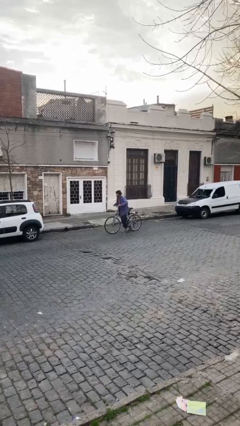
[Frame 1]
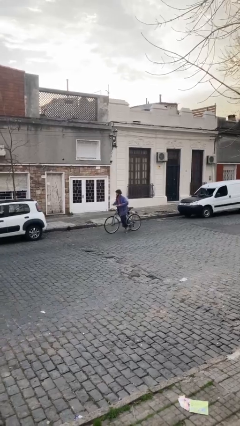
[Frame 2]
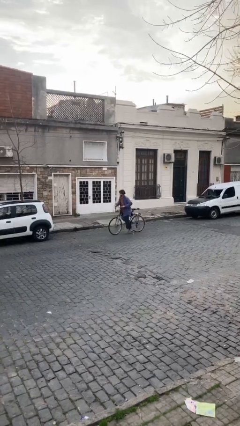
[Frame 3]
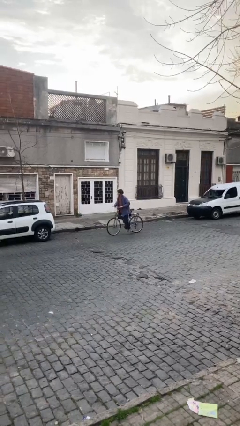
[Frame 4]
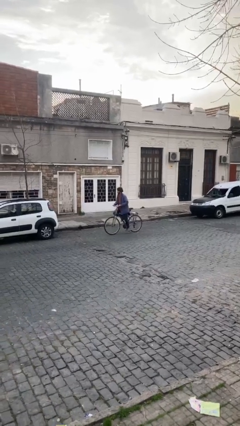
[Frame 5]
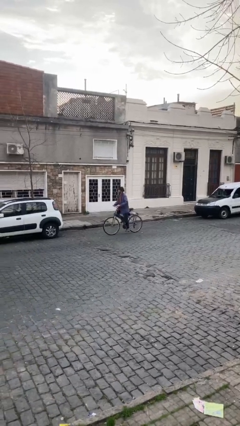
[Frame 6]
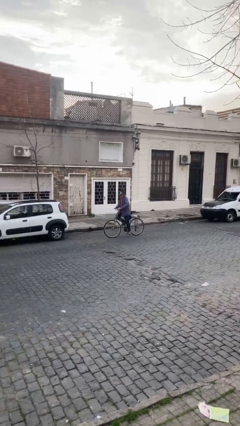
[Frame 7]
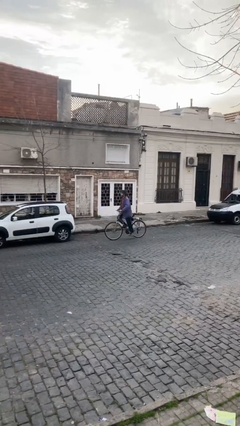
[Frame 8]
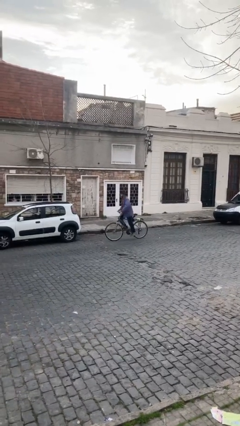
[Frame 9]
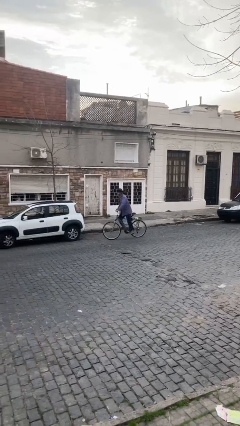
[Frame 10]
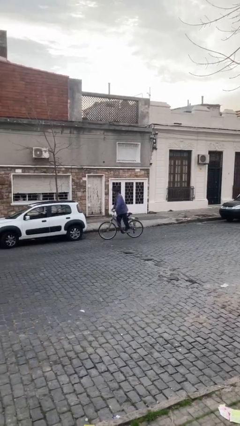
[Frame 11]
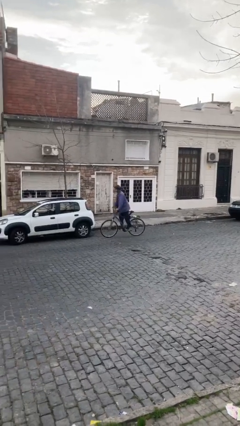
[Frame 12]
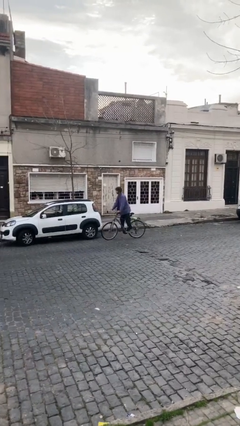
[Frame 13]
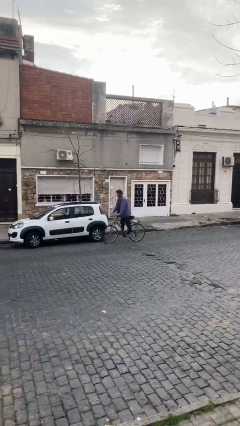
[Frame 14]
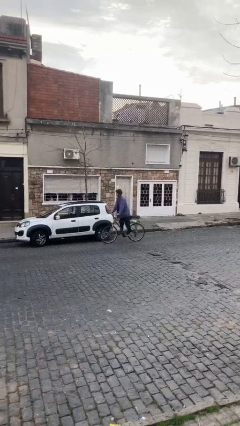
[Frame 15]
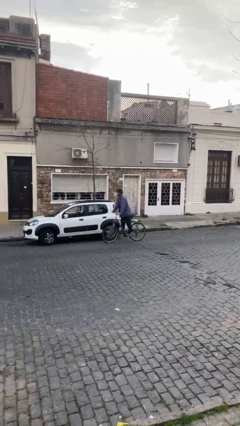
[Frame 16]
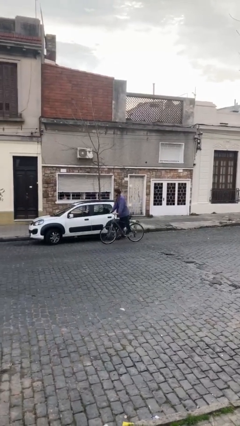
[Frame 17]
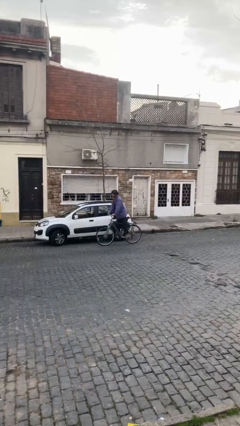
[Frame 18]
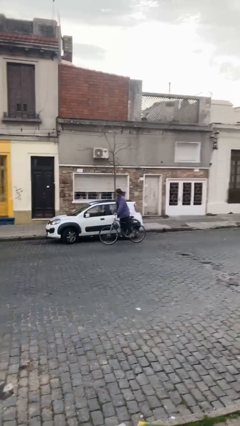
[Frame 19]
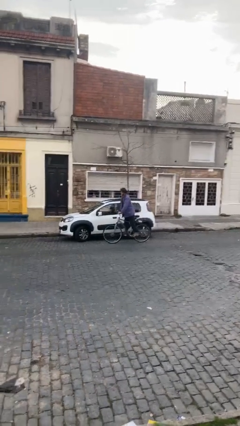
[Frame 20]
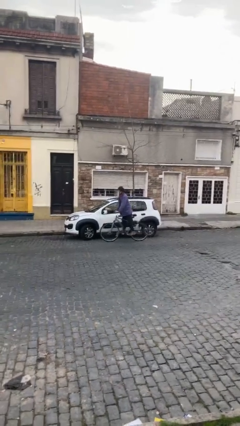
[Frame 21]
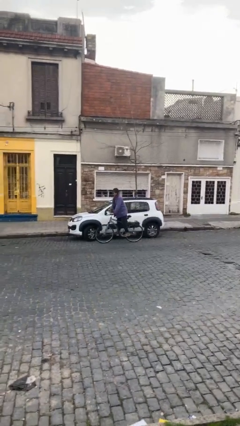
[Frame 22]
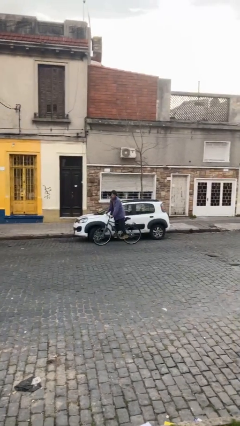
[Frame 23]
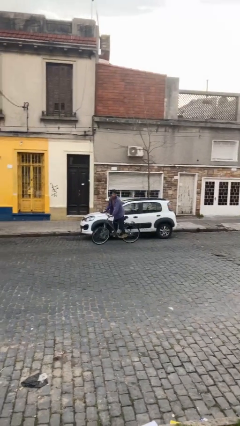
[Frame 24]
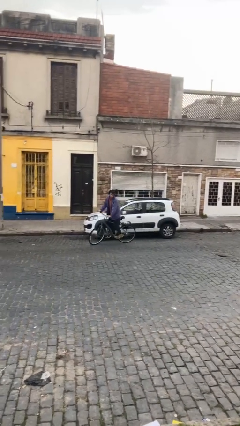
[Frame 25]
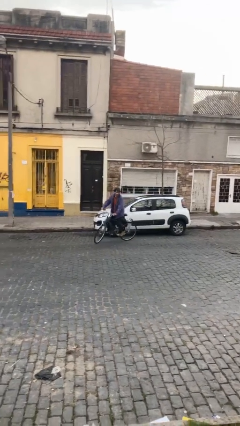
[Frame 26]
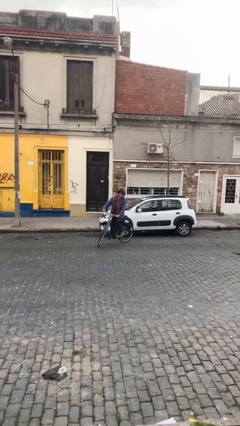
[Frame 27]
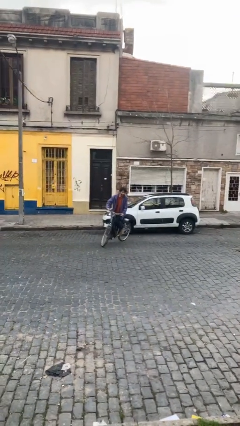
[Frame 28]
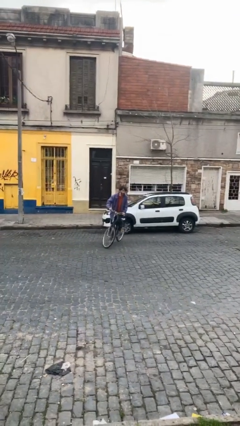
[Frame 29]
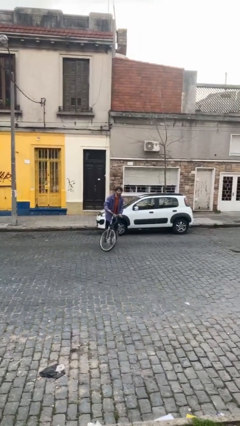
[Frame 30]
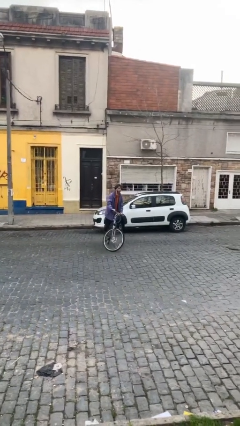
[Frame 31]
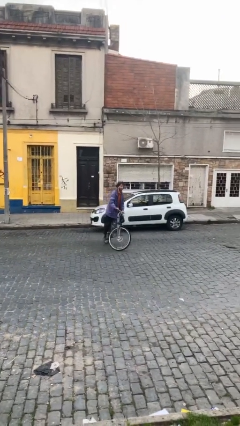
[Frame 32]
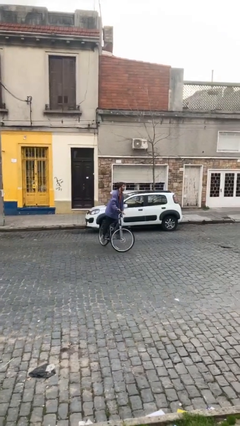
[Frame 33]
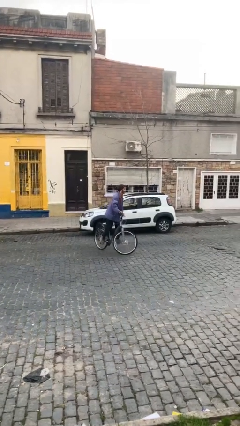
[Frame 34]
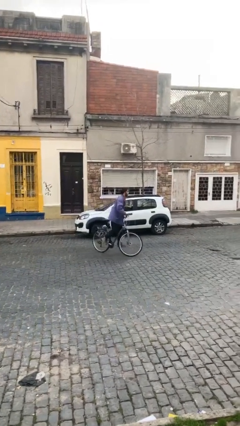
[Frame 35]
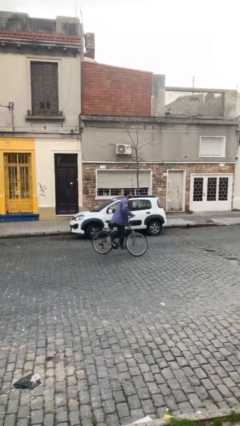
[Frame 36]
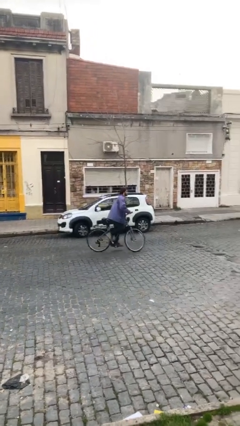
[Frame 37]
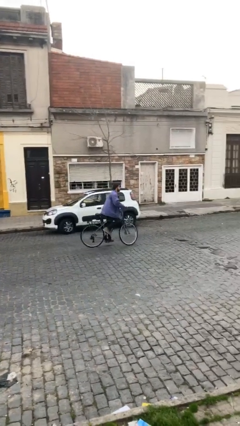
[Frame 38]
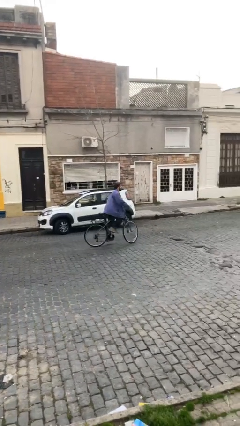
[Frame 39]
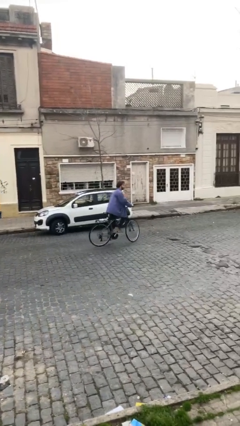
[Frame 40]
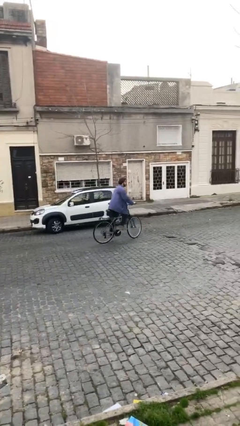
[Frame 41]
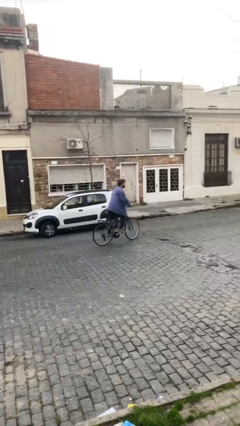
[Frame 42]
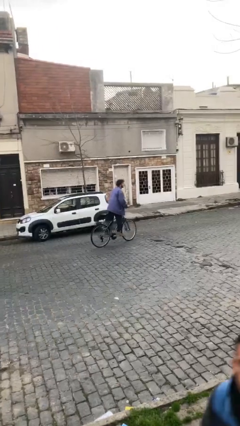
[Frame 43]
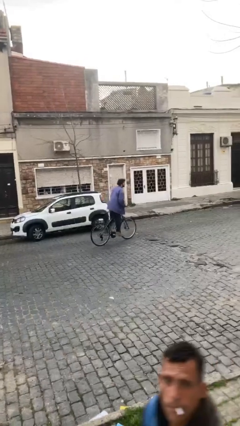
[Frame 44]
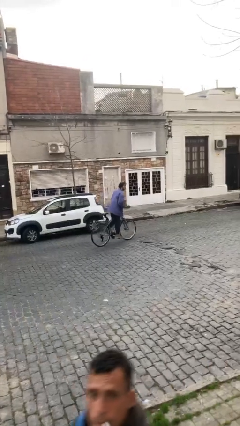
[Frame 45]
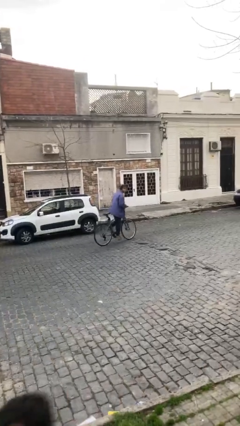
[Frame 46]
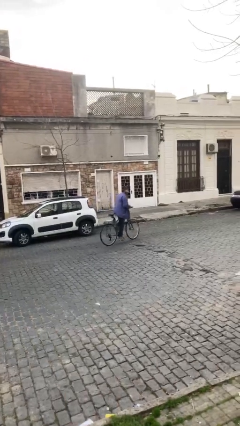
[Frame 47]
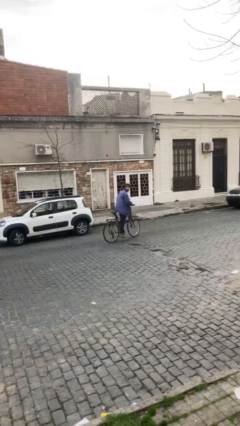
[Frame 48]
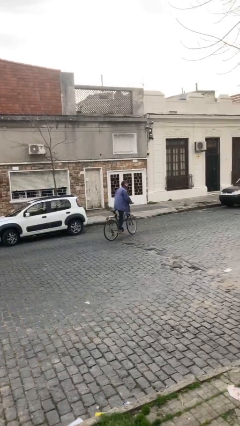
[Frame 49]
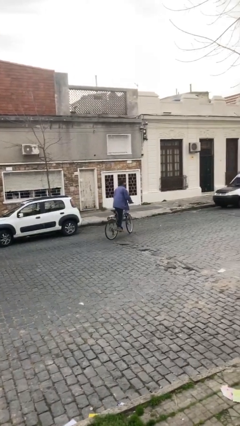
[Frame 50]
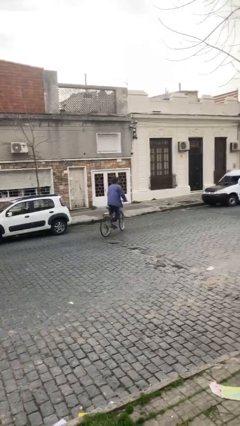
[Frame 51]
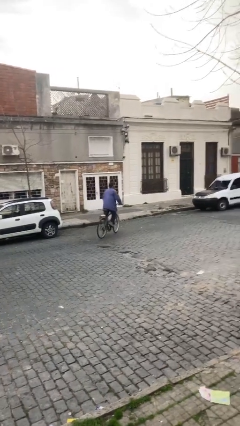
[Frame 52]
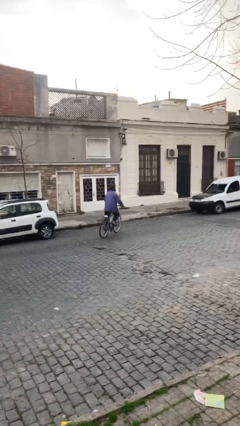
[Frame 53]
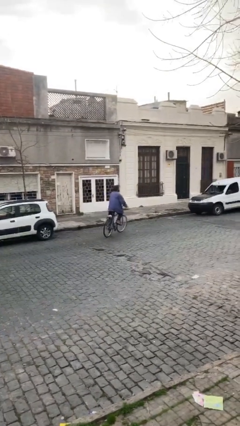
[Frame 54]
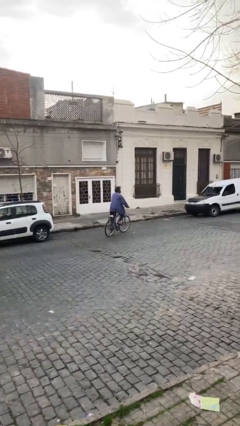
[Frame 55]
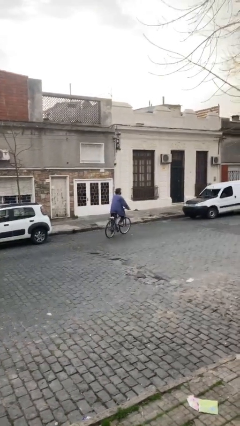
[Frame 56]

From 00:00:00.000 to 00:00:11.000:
person rides bicycle

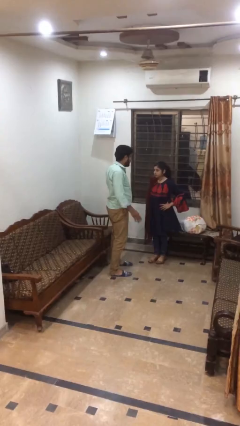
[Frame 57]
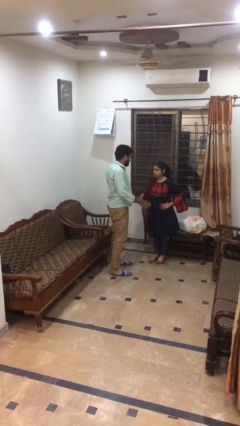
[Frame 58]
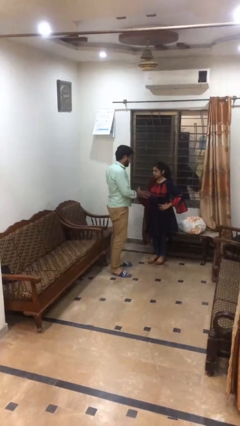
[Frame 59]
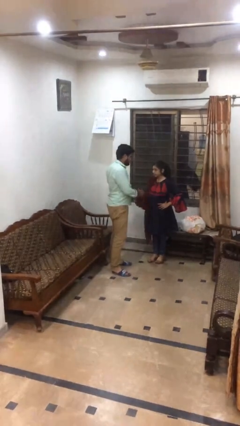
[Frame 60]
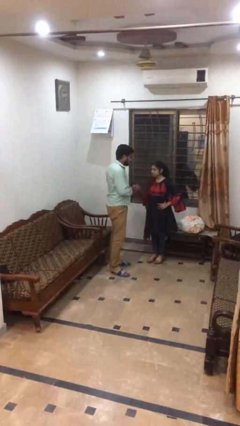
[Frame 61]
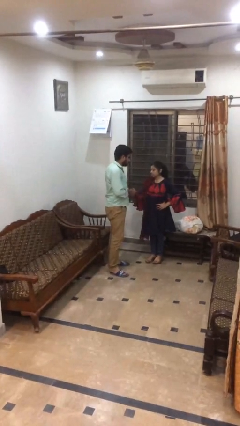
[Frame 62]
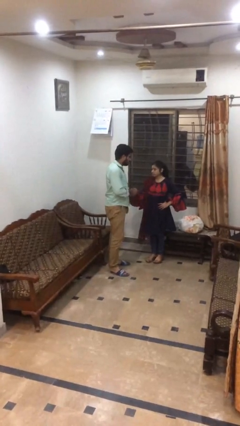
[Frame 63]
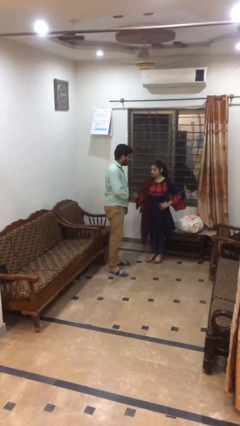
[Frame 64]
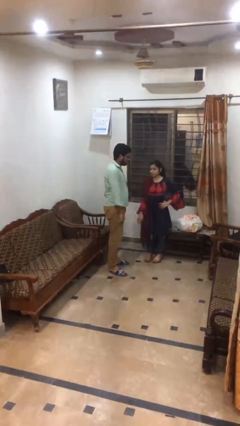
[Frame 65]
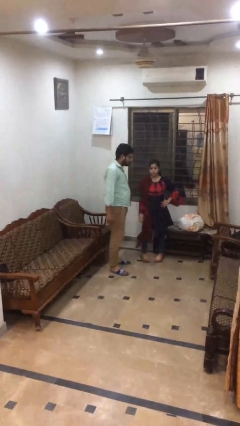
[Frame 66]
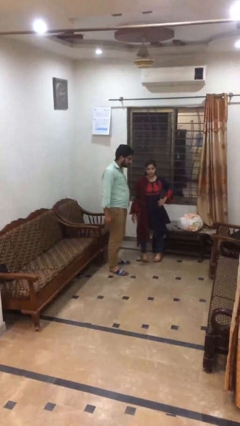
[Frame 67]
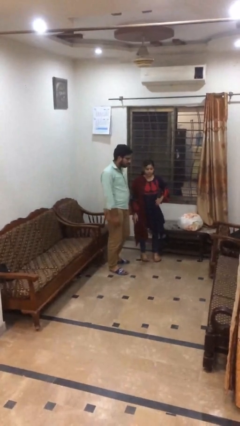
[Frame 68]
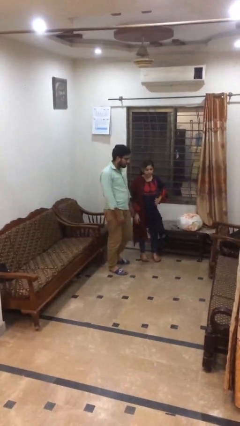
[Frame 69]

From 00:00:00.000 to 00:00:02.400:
person shakes hand

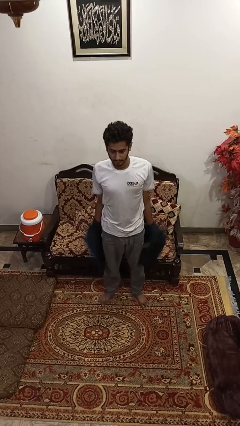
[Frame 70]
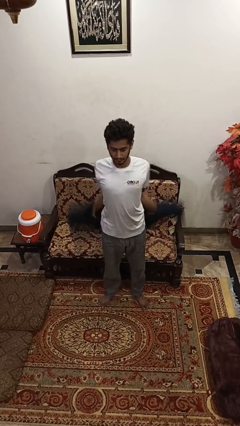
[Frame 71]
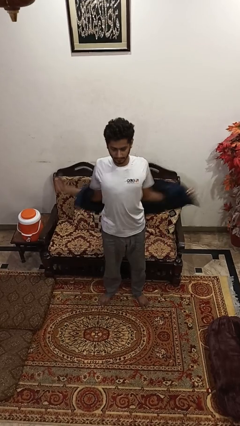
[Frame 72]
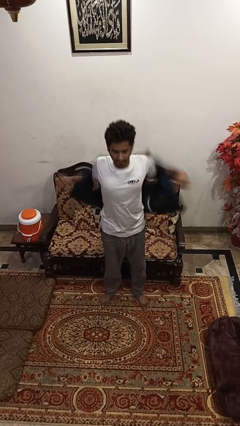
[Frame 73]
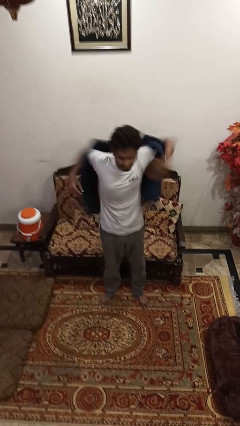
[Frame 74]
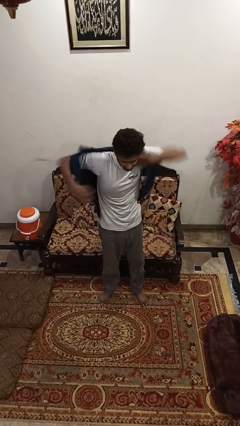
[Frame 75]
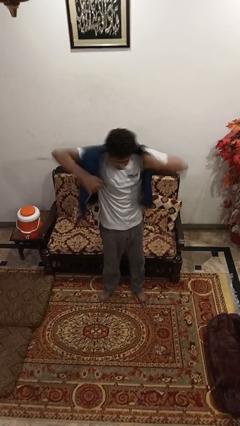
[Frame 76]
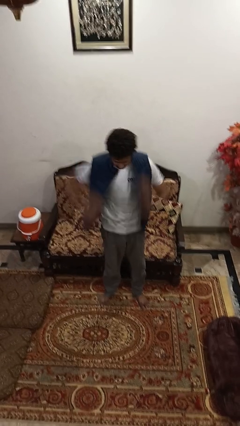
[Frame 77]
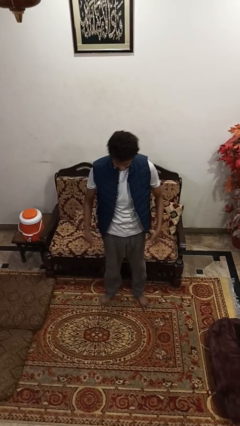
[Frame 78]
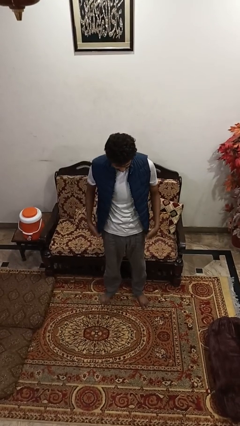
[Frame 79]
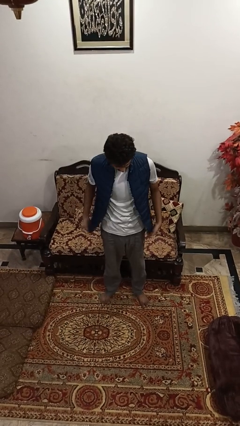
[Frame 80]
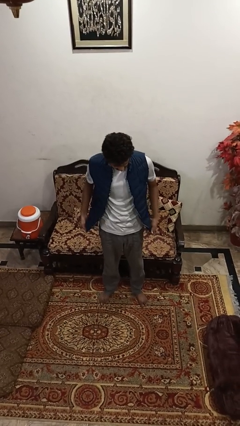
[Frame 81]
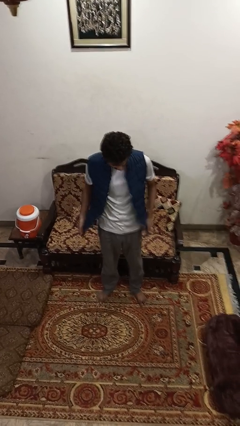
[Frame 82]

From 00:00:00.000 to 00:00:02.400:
person puts on jacket

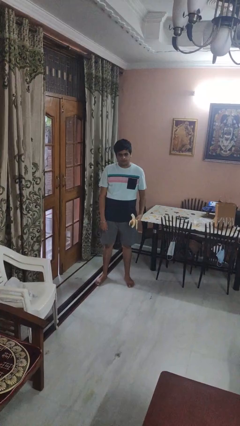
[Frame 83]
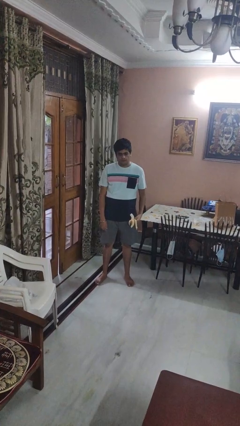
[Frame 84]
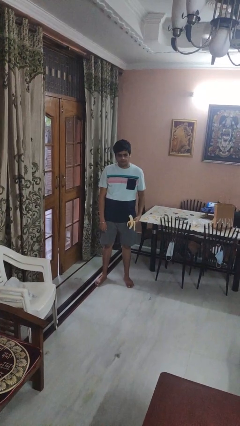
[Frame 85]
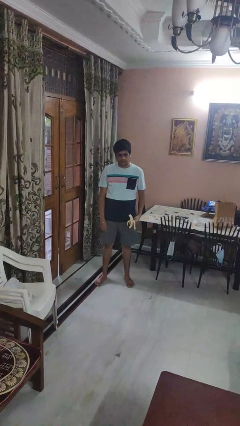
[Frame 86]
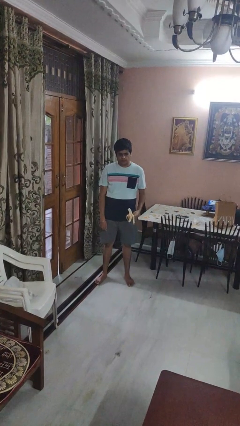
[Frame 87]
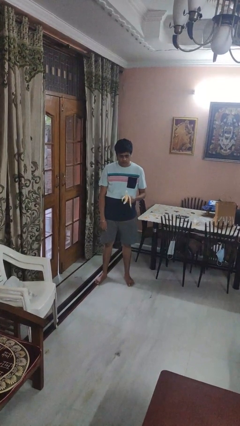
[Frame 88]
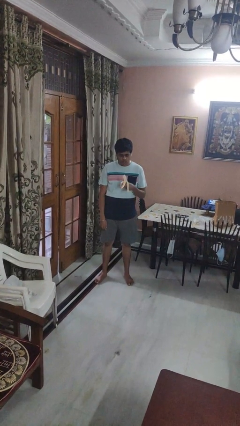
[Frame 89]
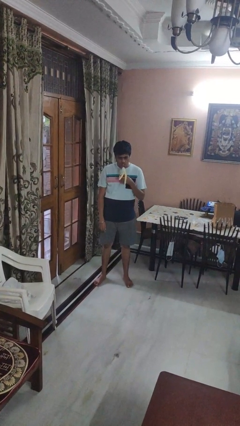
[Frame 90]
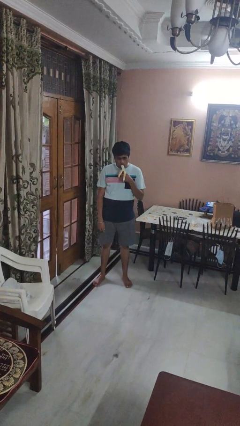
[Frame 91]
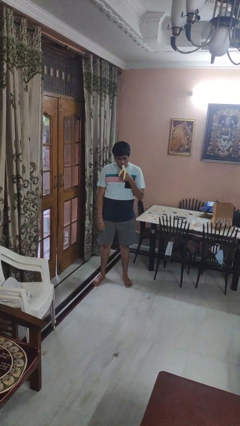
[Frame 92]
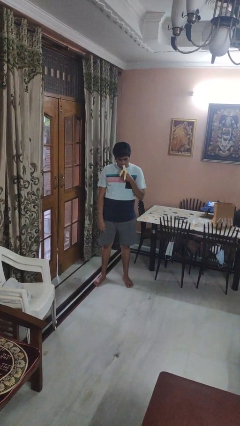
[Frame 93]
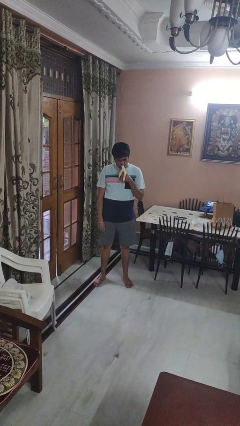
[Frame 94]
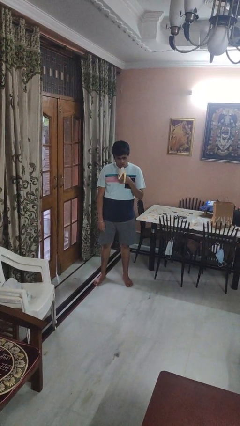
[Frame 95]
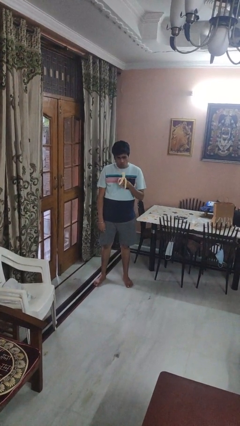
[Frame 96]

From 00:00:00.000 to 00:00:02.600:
person eats banana
